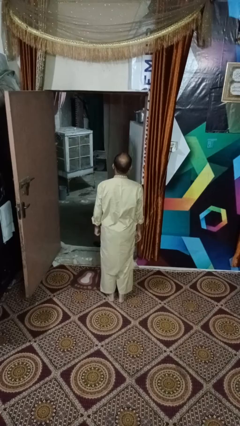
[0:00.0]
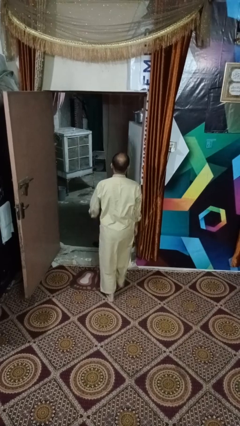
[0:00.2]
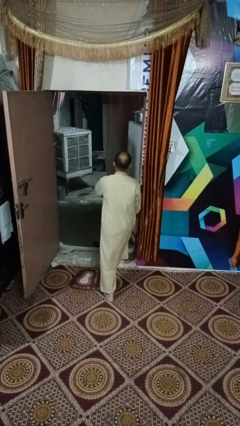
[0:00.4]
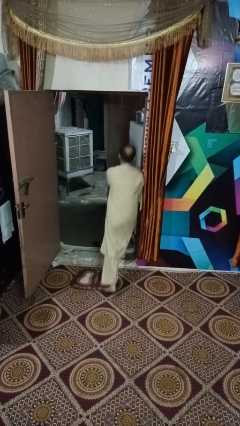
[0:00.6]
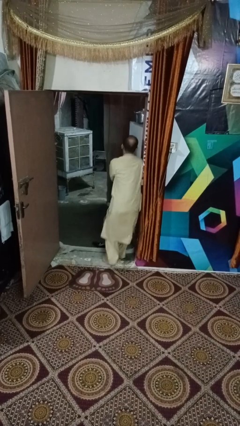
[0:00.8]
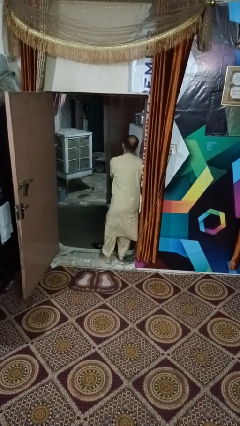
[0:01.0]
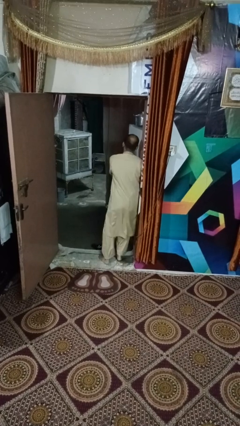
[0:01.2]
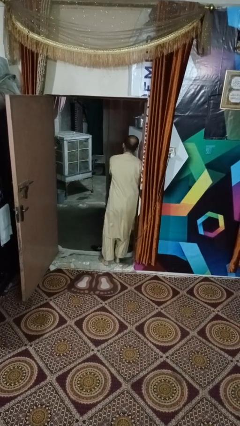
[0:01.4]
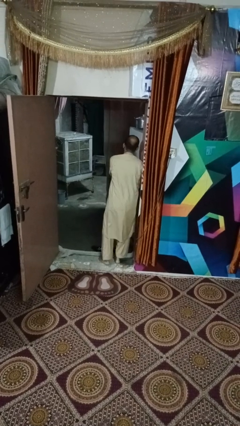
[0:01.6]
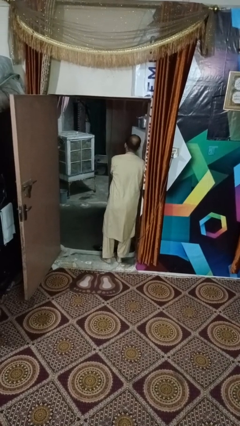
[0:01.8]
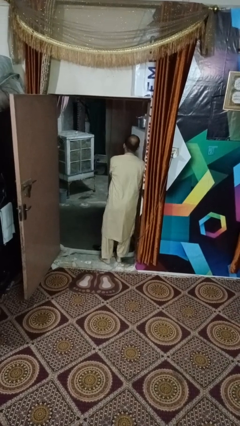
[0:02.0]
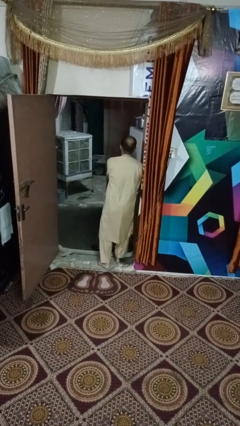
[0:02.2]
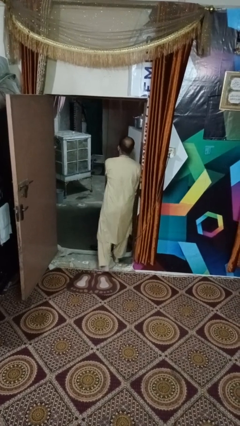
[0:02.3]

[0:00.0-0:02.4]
person bumps into wall

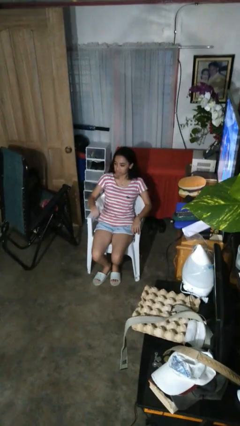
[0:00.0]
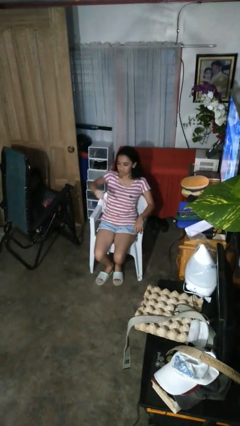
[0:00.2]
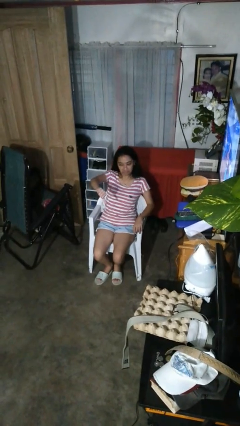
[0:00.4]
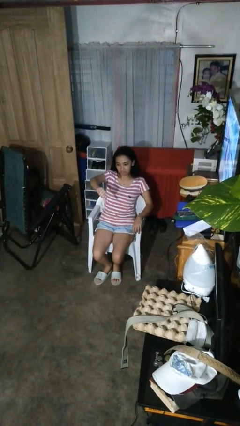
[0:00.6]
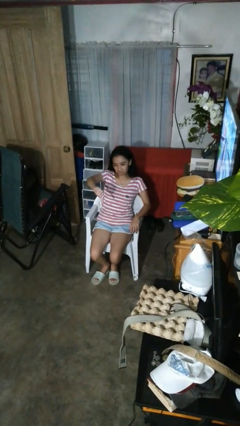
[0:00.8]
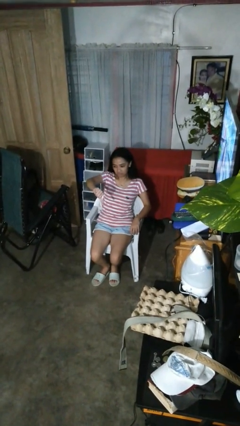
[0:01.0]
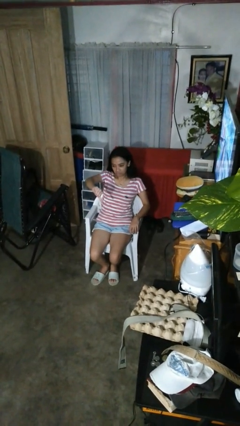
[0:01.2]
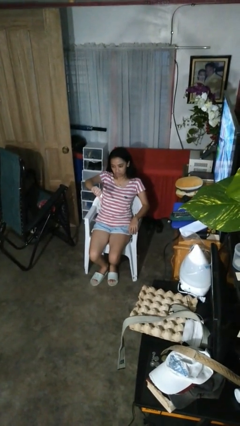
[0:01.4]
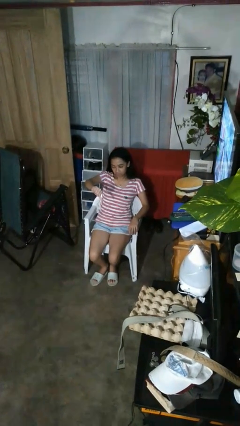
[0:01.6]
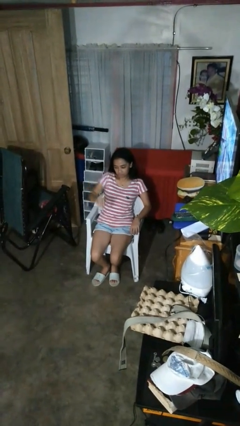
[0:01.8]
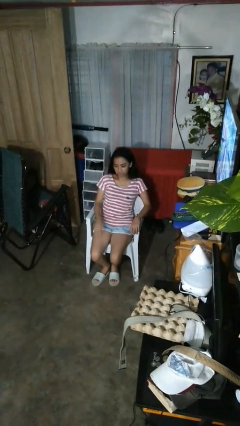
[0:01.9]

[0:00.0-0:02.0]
person gestures thumbs down

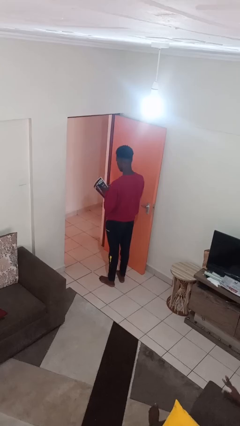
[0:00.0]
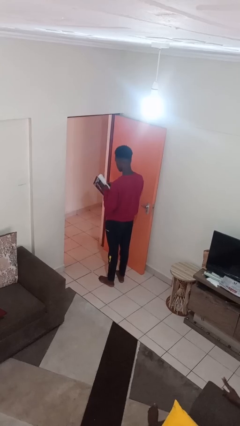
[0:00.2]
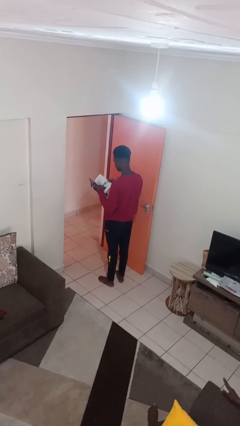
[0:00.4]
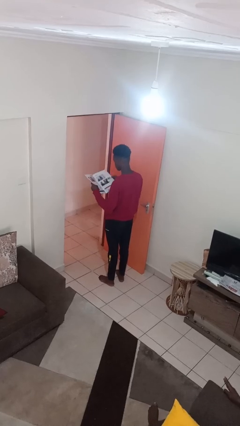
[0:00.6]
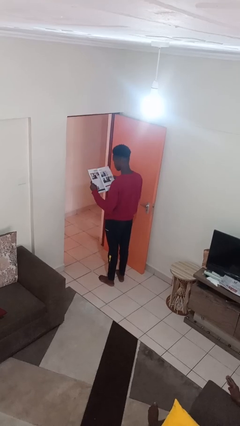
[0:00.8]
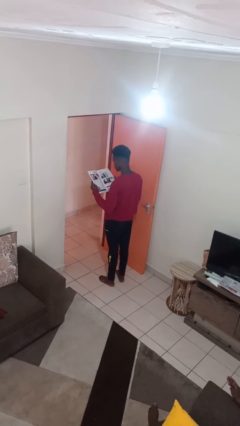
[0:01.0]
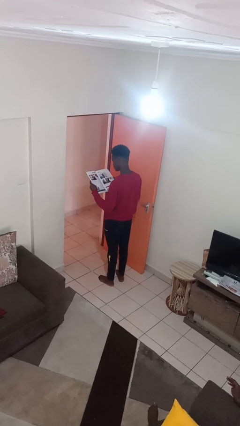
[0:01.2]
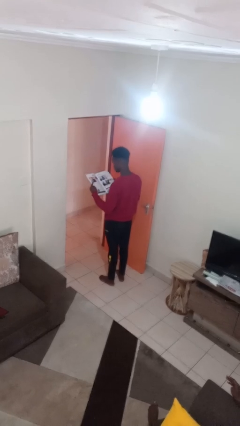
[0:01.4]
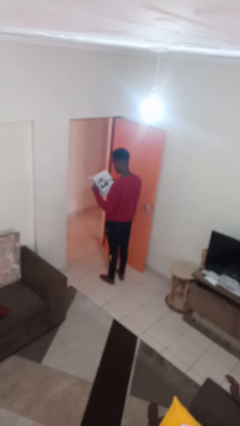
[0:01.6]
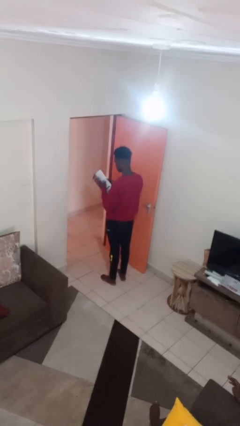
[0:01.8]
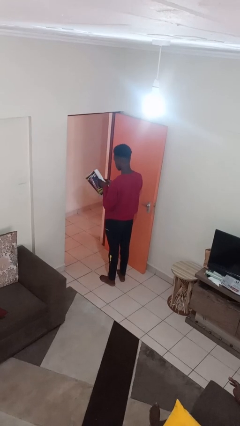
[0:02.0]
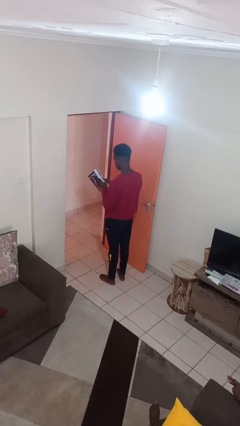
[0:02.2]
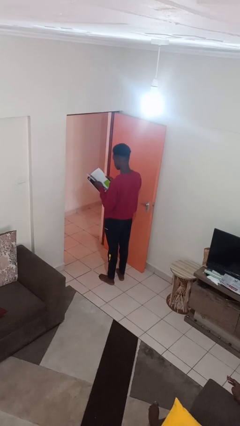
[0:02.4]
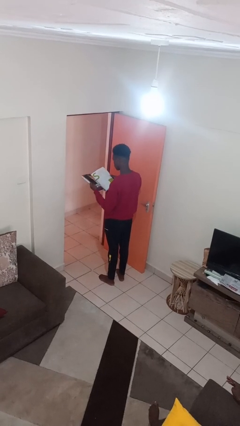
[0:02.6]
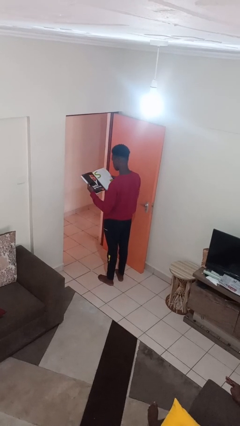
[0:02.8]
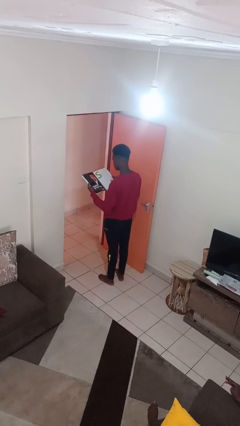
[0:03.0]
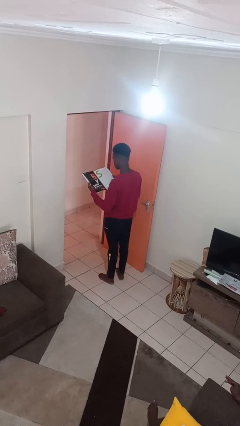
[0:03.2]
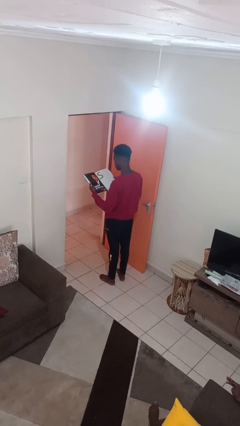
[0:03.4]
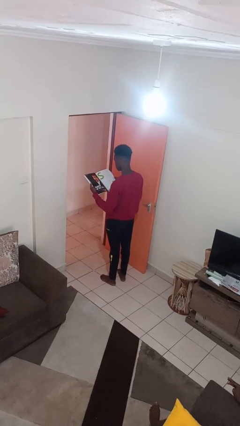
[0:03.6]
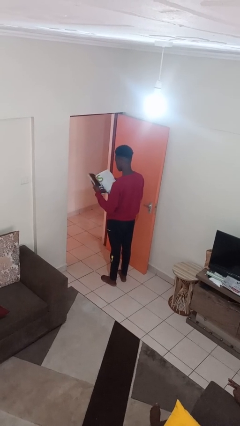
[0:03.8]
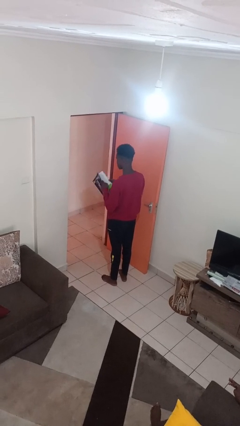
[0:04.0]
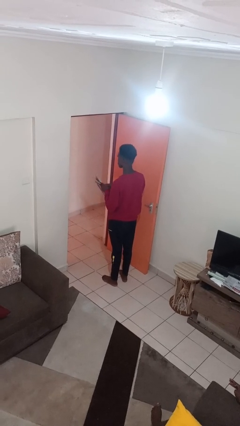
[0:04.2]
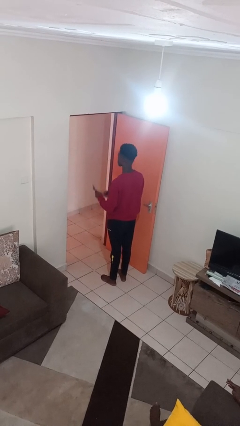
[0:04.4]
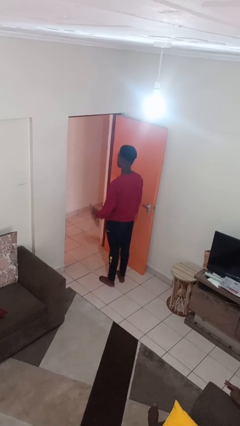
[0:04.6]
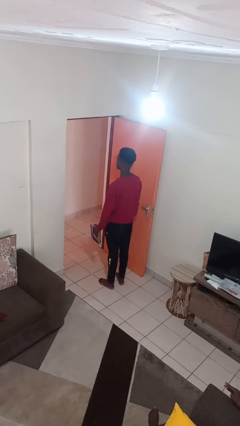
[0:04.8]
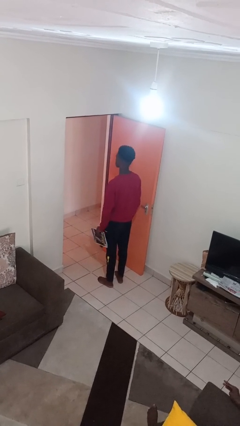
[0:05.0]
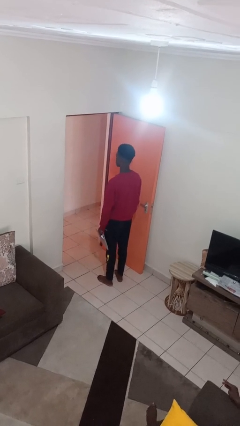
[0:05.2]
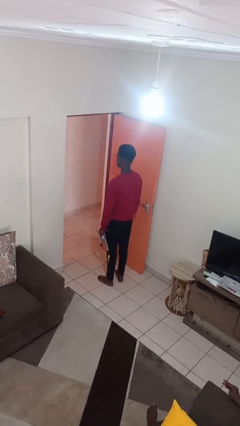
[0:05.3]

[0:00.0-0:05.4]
person reads magazine

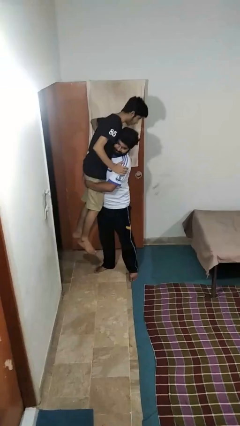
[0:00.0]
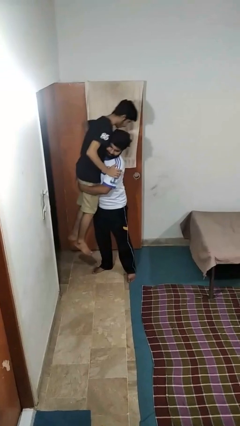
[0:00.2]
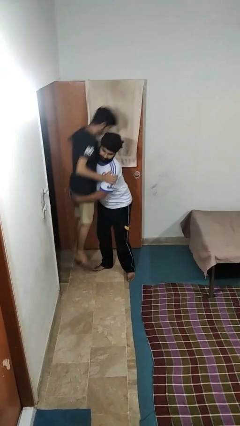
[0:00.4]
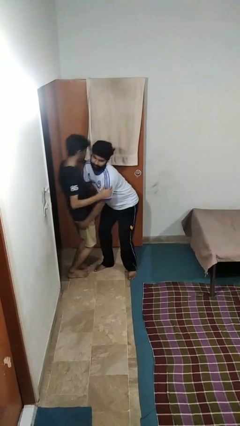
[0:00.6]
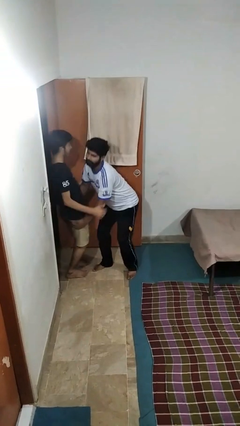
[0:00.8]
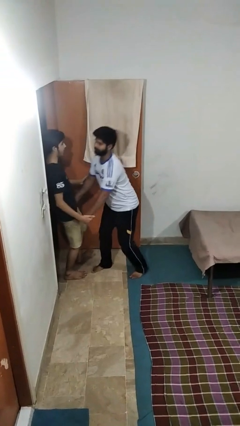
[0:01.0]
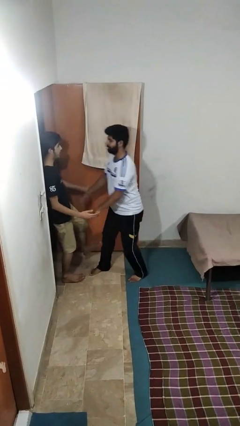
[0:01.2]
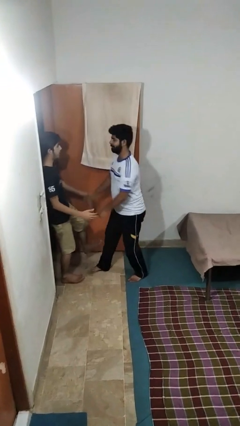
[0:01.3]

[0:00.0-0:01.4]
person puts down person

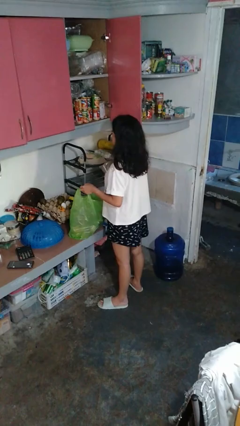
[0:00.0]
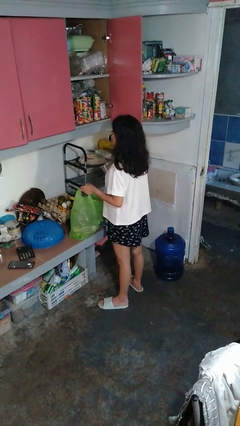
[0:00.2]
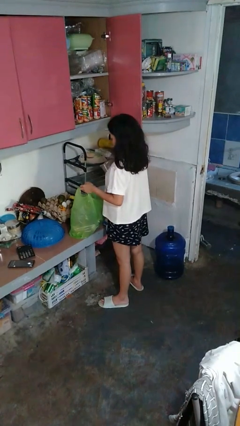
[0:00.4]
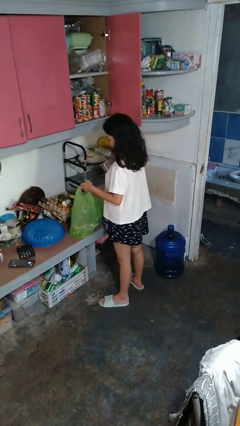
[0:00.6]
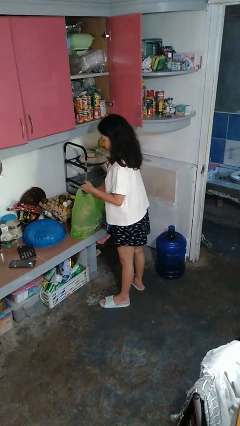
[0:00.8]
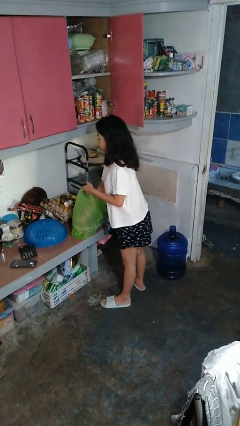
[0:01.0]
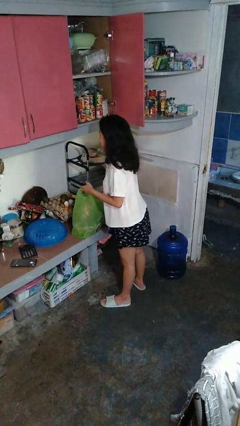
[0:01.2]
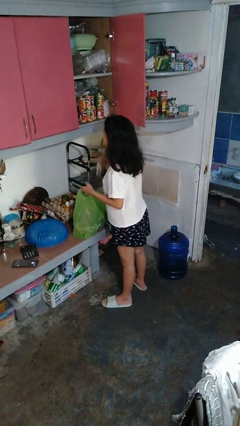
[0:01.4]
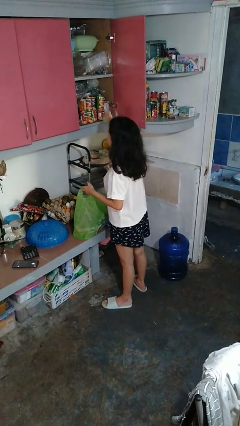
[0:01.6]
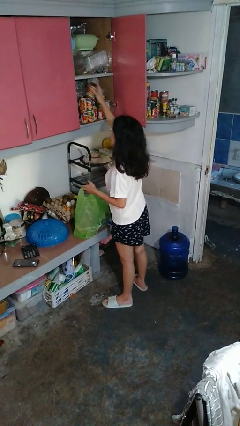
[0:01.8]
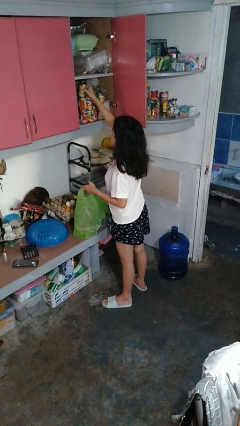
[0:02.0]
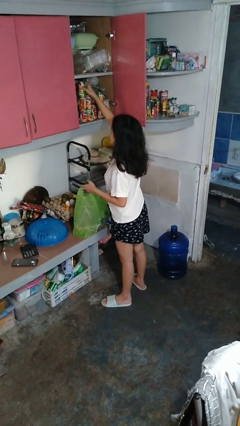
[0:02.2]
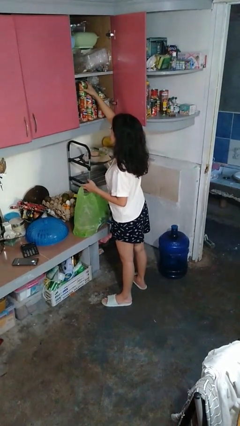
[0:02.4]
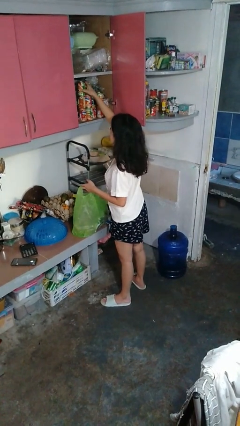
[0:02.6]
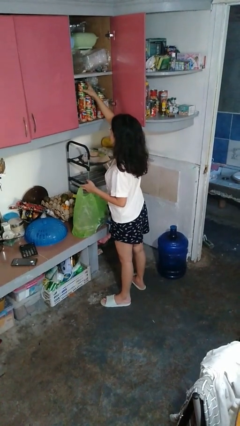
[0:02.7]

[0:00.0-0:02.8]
person loads groceries into cabinet

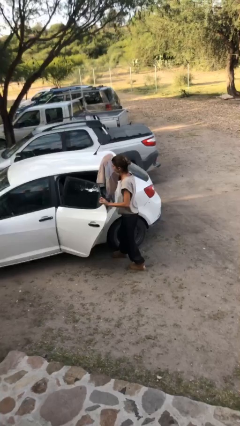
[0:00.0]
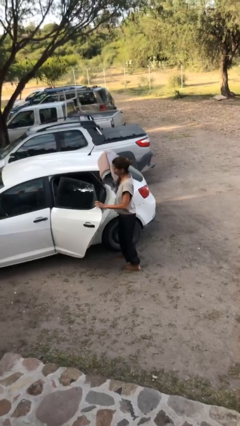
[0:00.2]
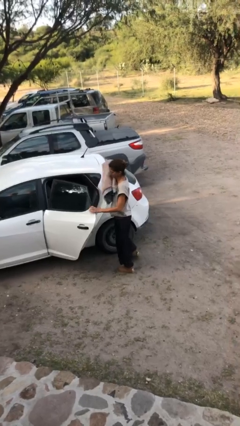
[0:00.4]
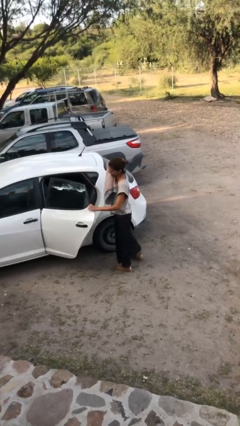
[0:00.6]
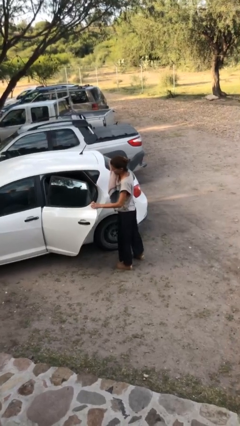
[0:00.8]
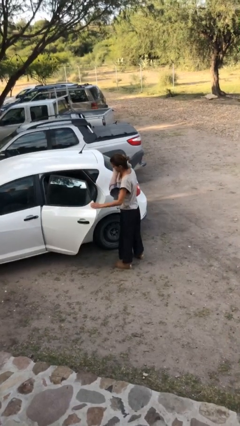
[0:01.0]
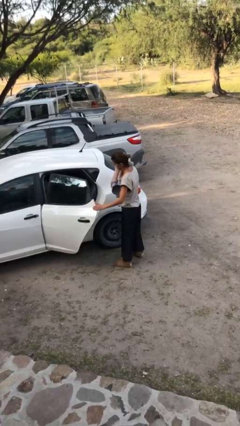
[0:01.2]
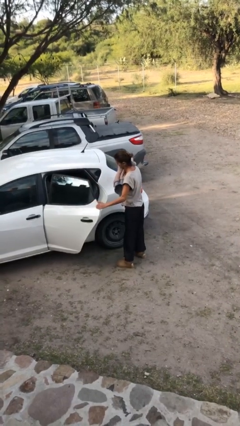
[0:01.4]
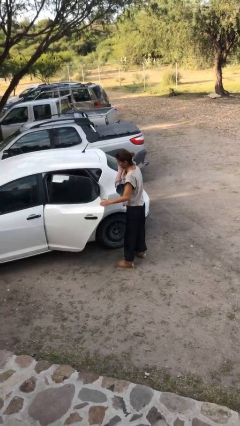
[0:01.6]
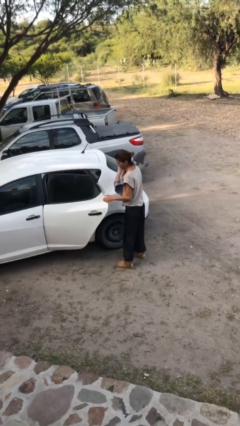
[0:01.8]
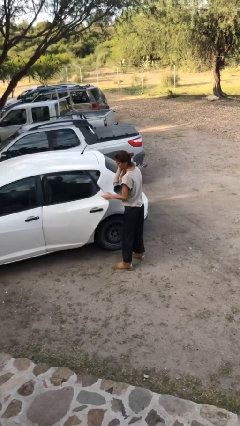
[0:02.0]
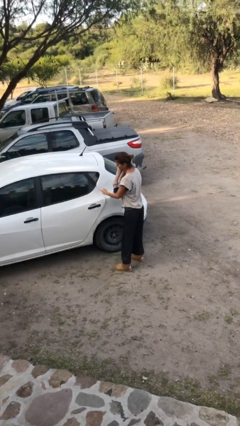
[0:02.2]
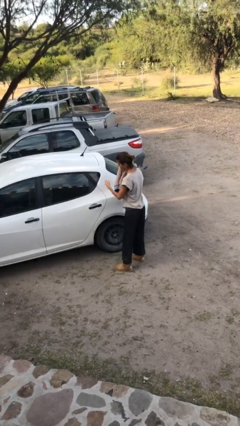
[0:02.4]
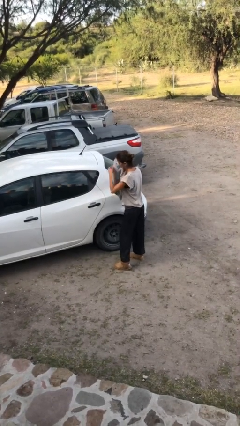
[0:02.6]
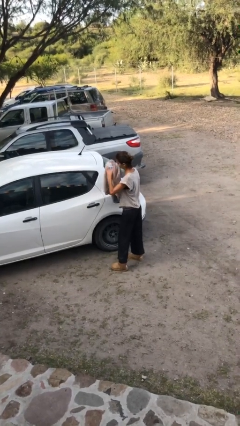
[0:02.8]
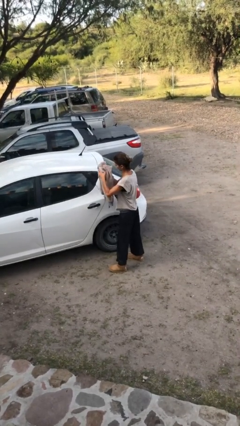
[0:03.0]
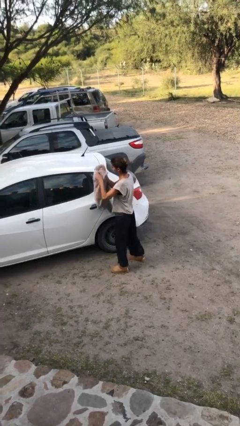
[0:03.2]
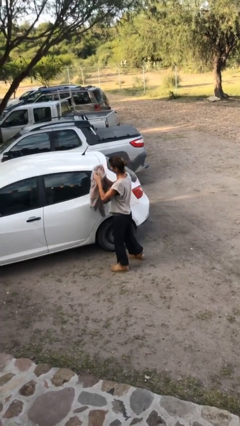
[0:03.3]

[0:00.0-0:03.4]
person closes car door
